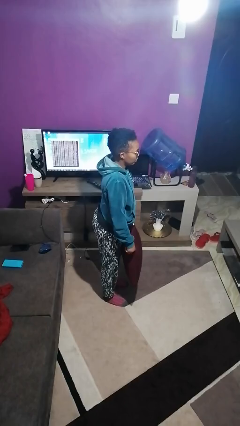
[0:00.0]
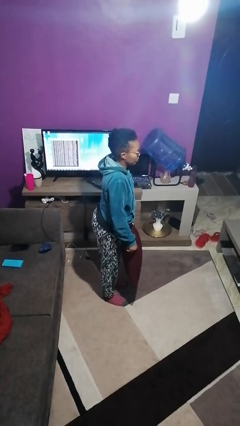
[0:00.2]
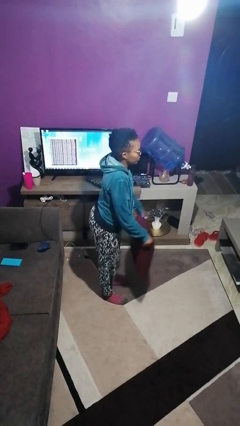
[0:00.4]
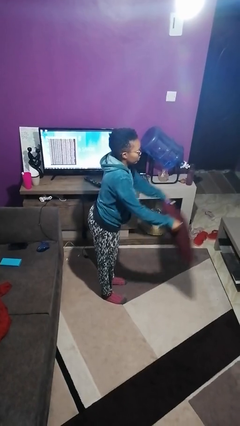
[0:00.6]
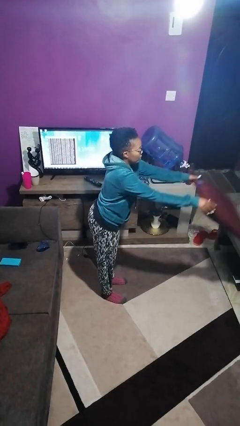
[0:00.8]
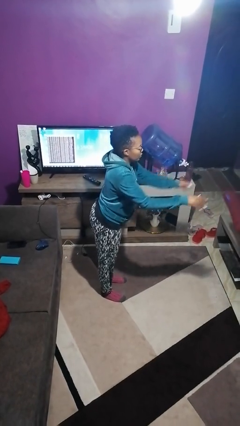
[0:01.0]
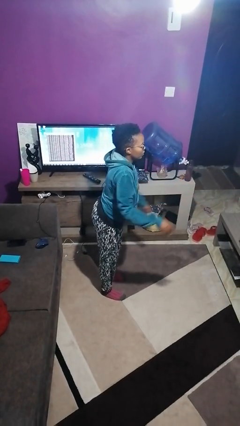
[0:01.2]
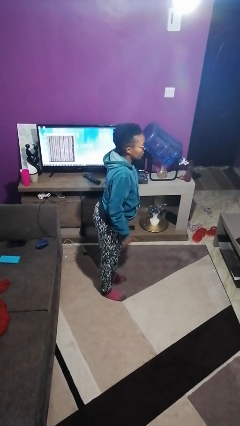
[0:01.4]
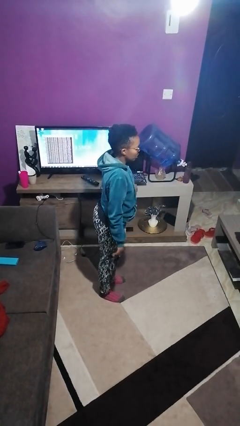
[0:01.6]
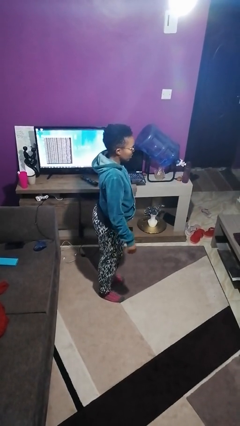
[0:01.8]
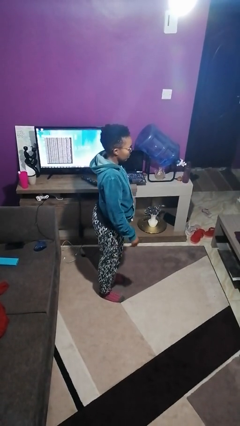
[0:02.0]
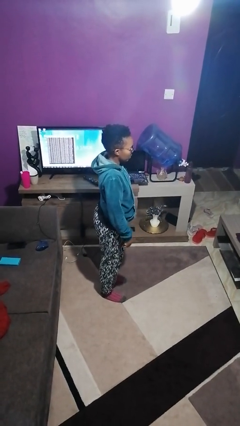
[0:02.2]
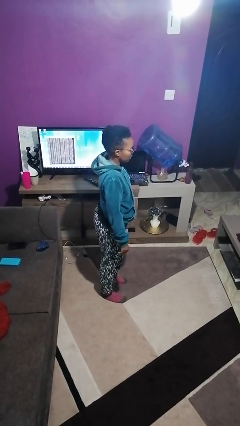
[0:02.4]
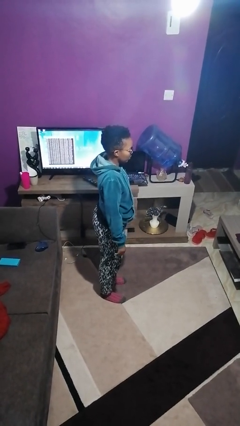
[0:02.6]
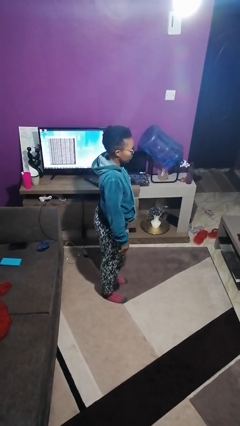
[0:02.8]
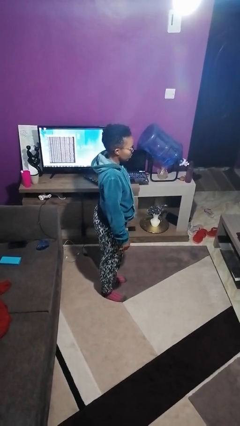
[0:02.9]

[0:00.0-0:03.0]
person throws object on table

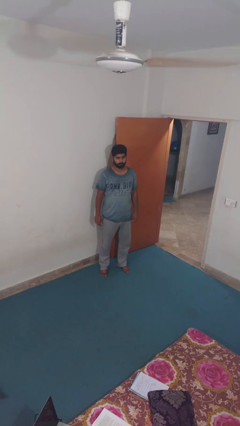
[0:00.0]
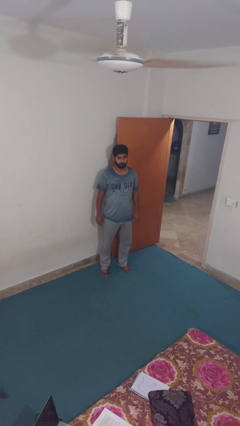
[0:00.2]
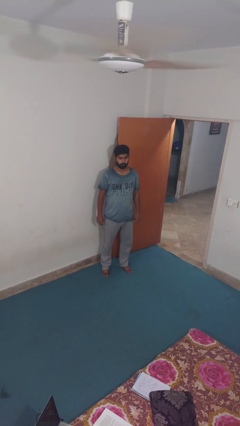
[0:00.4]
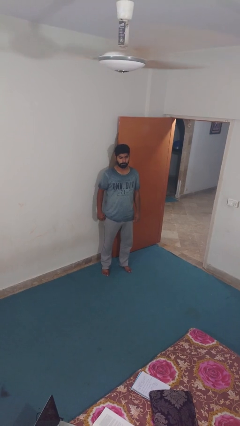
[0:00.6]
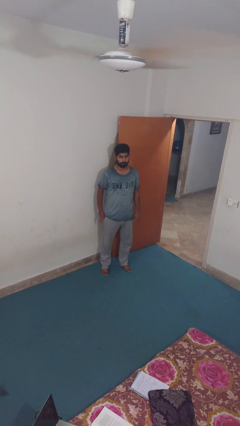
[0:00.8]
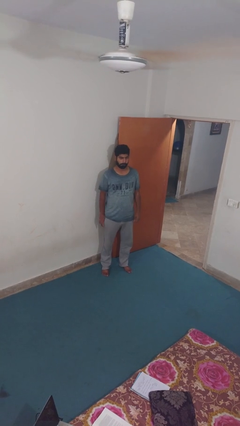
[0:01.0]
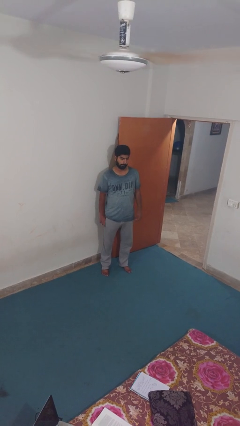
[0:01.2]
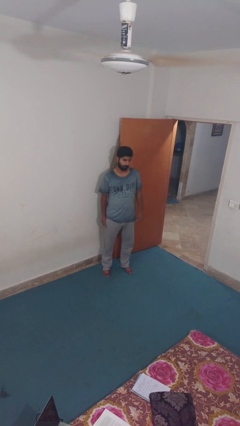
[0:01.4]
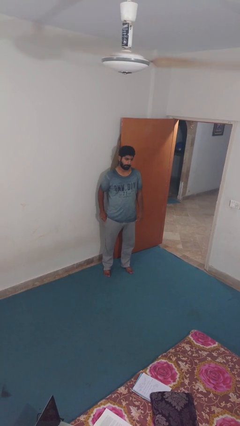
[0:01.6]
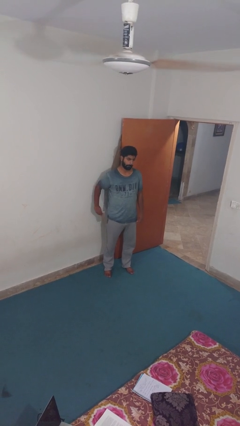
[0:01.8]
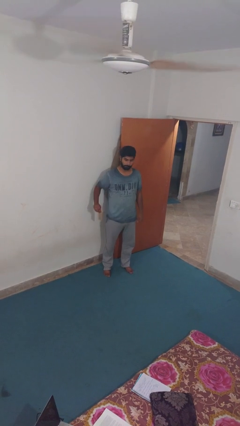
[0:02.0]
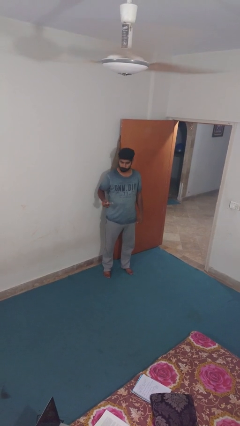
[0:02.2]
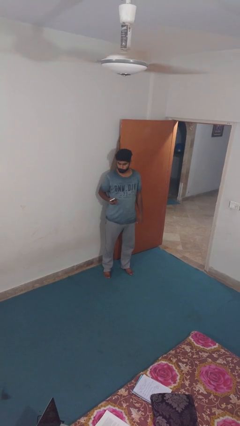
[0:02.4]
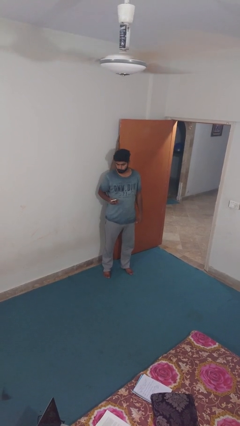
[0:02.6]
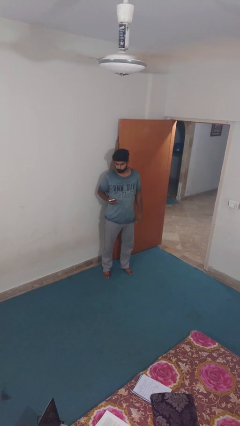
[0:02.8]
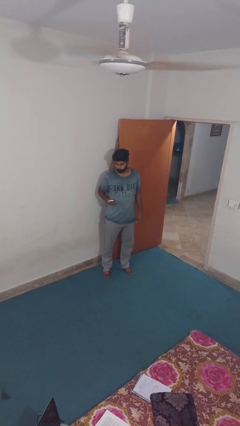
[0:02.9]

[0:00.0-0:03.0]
person takes phone from pocket

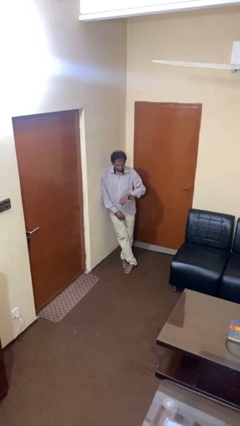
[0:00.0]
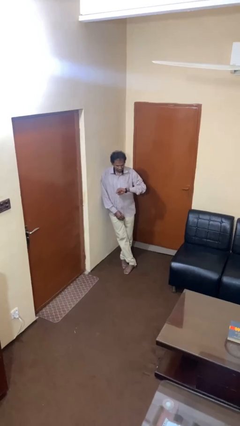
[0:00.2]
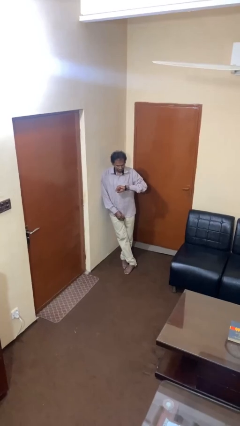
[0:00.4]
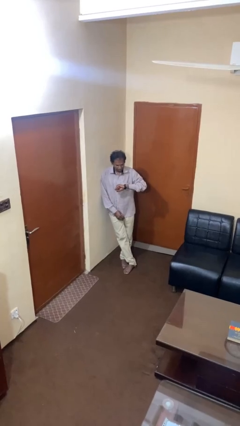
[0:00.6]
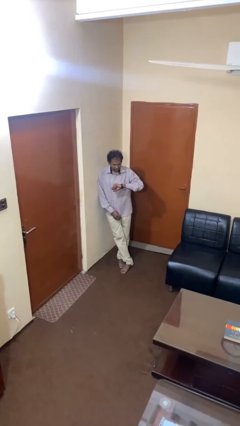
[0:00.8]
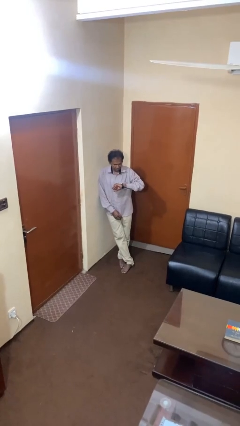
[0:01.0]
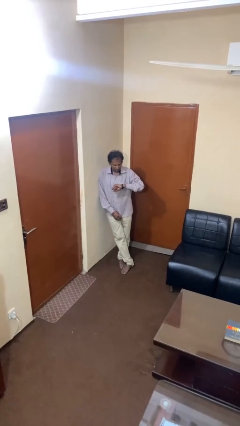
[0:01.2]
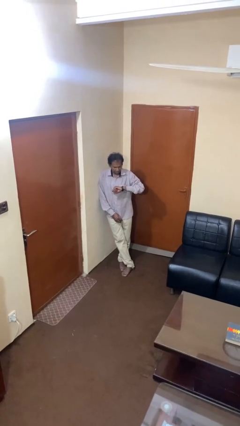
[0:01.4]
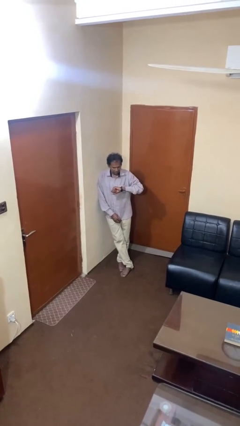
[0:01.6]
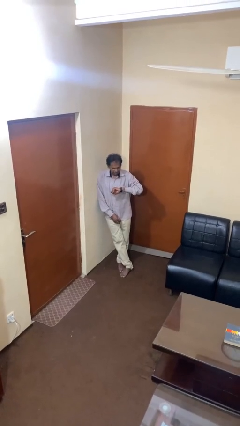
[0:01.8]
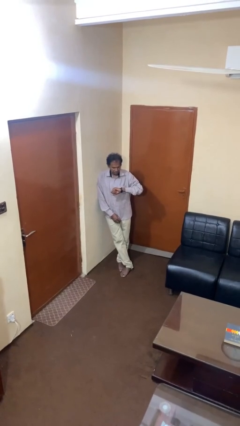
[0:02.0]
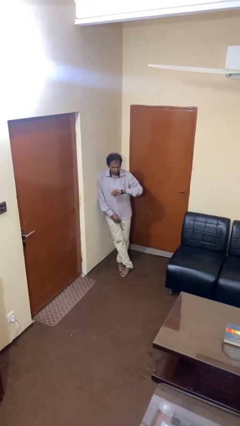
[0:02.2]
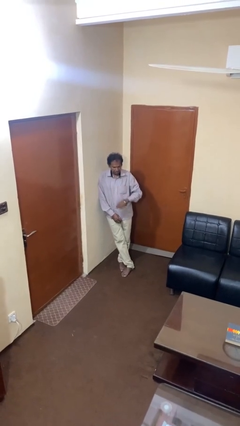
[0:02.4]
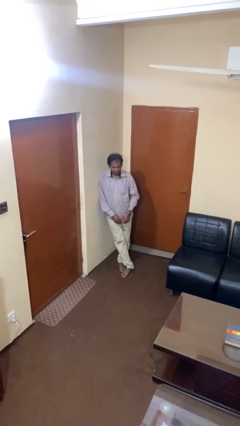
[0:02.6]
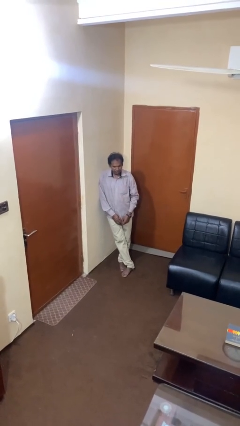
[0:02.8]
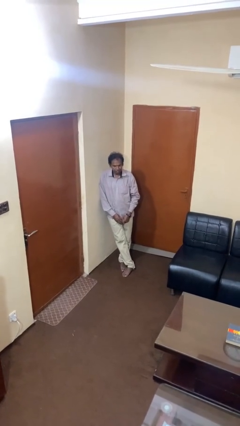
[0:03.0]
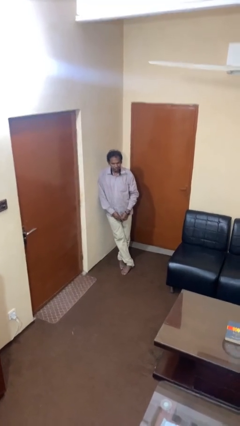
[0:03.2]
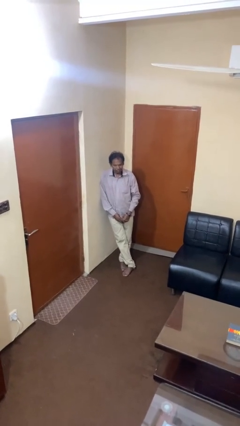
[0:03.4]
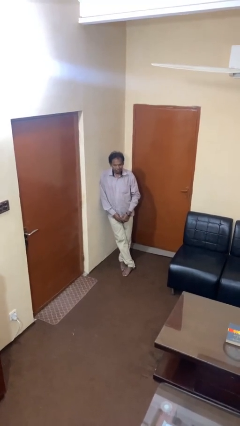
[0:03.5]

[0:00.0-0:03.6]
person looks at wristwatch

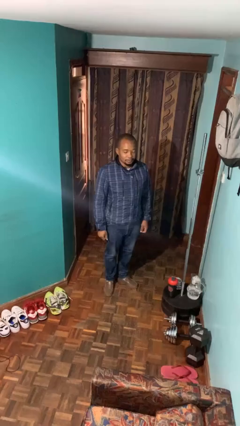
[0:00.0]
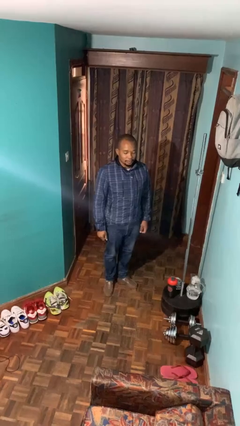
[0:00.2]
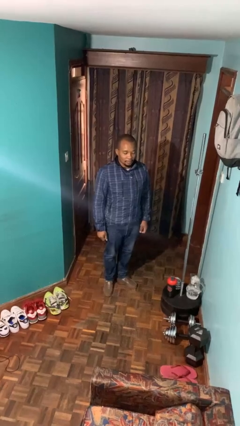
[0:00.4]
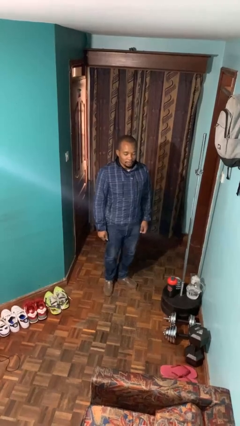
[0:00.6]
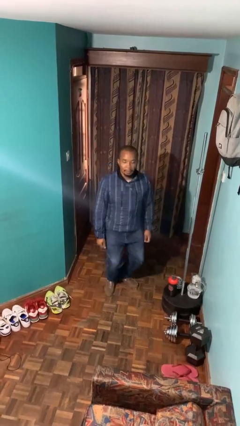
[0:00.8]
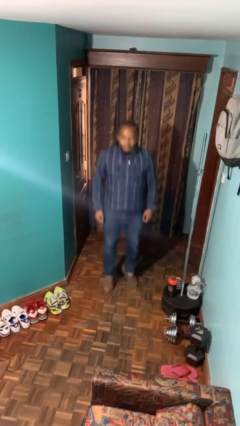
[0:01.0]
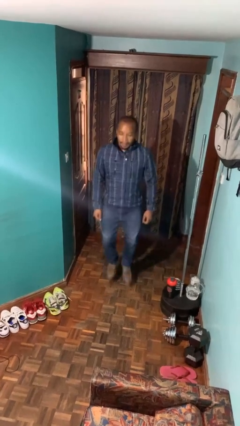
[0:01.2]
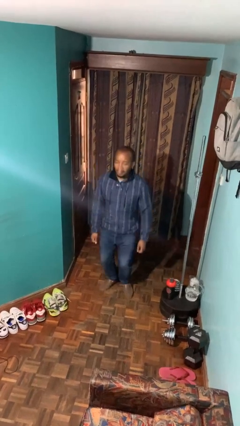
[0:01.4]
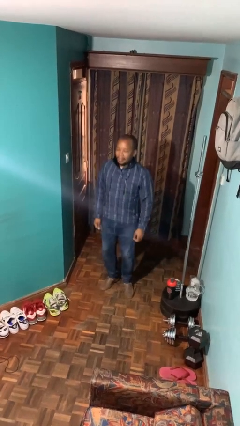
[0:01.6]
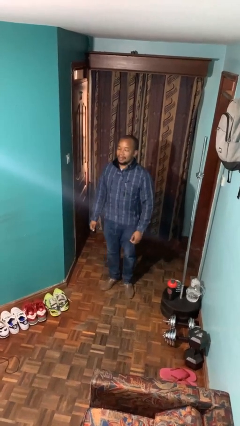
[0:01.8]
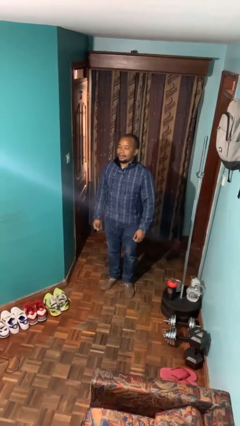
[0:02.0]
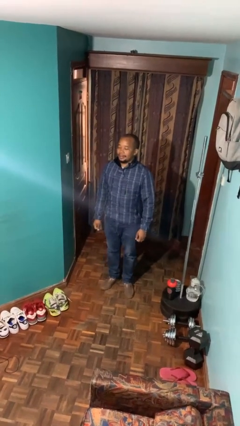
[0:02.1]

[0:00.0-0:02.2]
person jumps

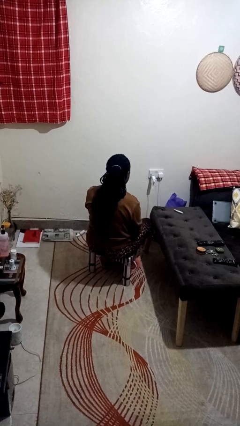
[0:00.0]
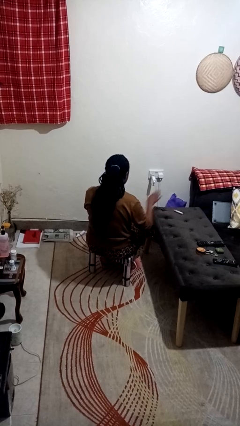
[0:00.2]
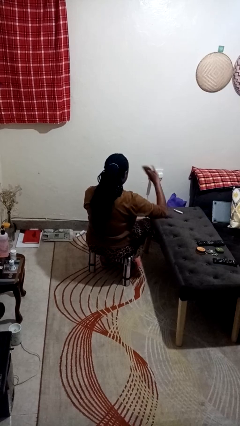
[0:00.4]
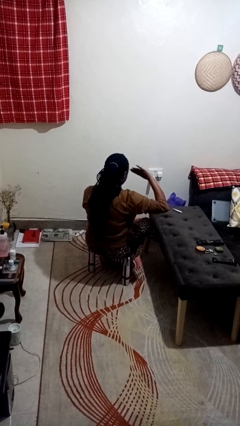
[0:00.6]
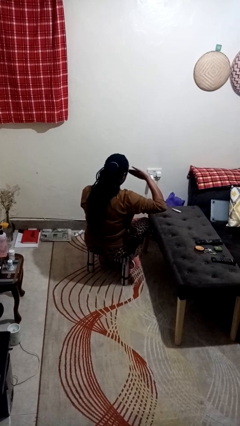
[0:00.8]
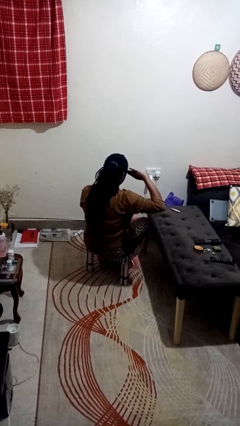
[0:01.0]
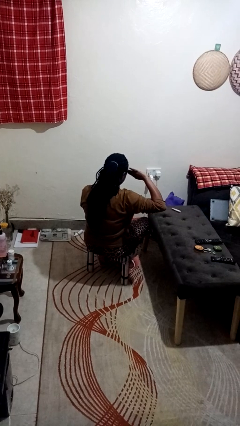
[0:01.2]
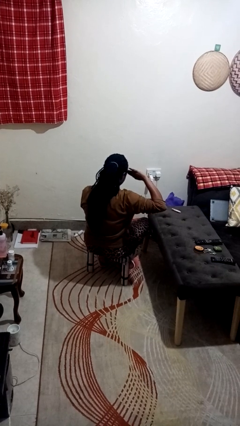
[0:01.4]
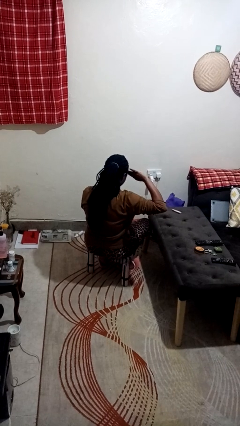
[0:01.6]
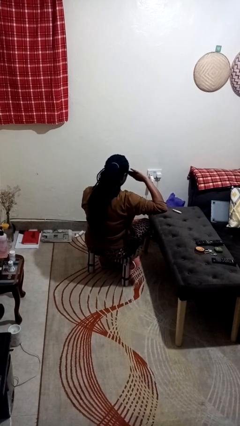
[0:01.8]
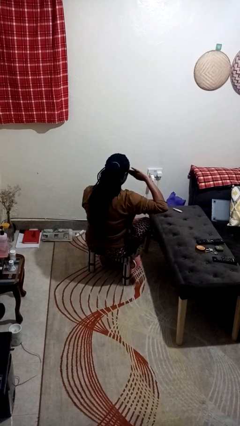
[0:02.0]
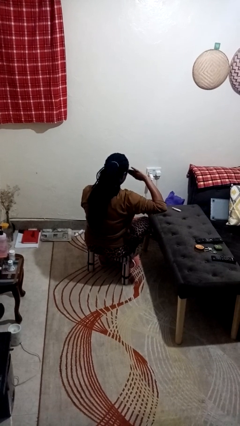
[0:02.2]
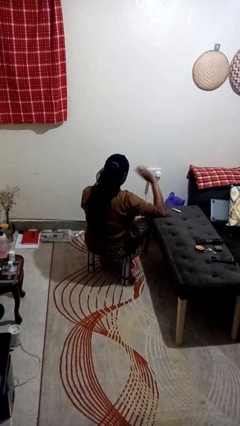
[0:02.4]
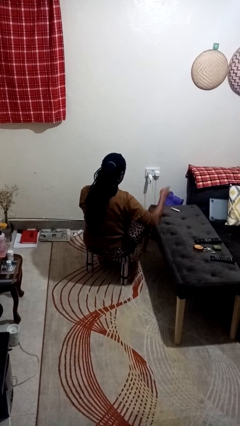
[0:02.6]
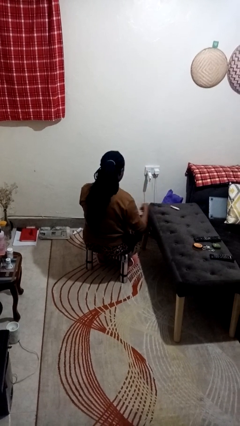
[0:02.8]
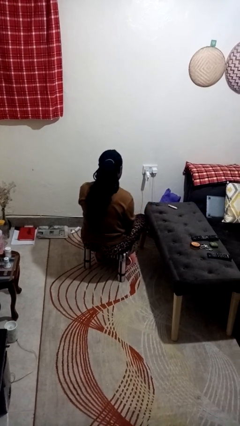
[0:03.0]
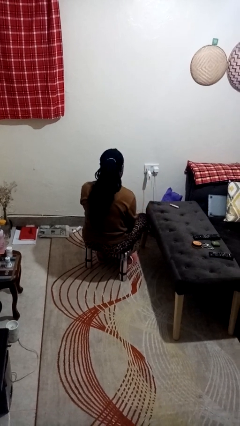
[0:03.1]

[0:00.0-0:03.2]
person salutes

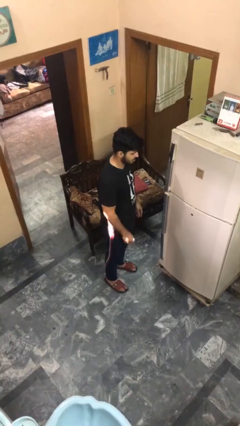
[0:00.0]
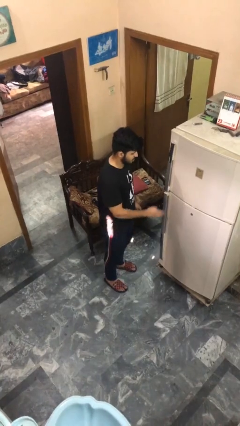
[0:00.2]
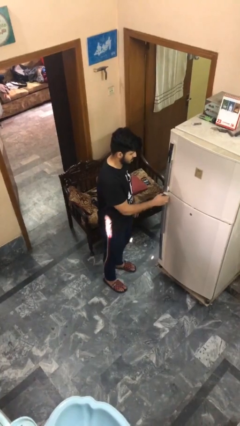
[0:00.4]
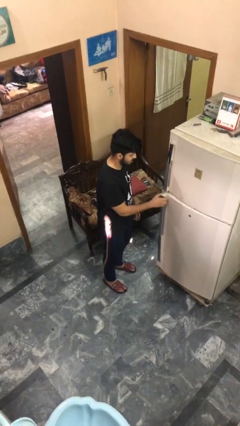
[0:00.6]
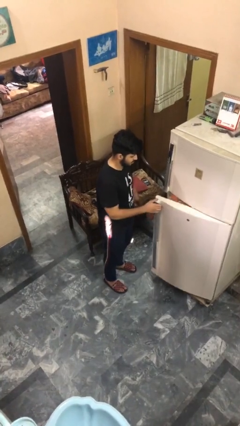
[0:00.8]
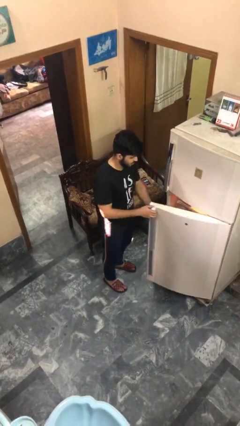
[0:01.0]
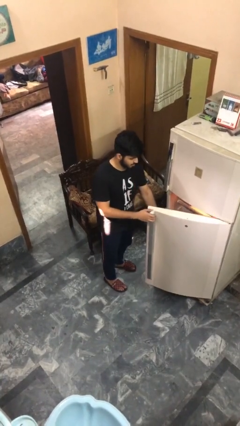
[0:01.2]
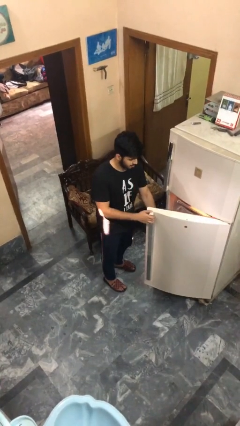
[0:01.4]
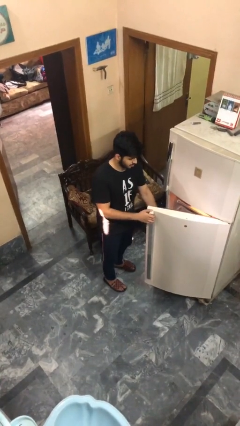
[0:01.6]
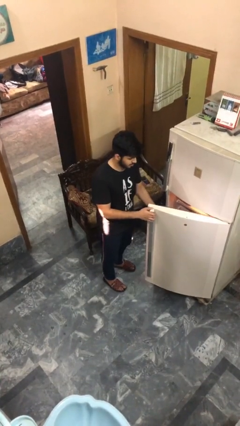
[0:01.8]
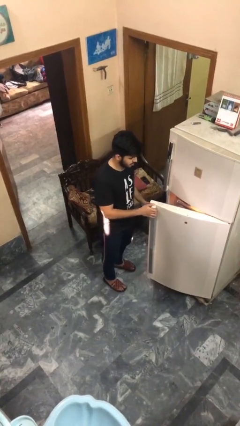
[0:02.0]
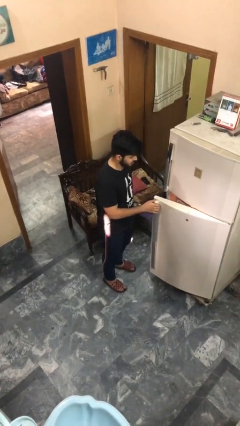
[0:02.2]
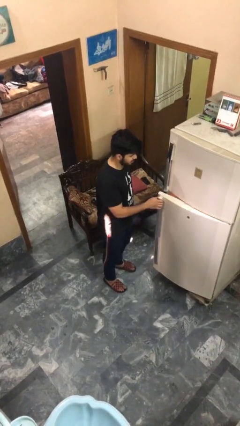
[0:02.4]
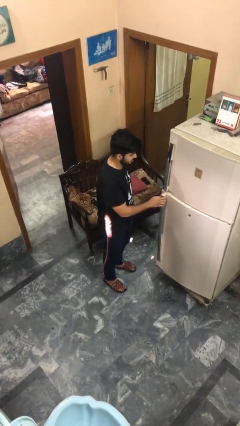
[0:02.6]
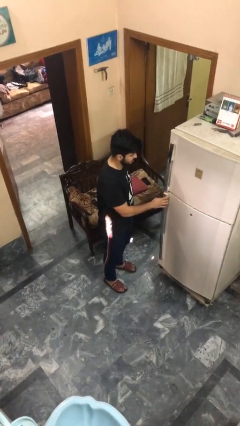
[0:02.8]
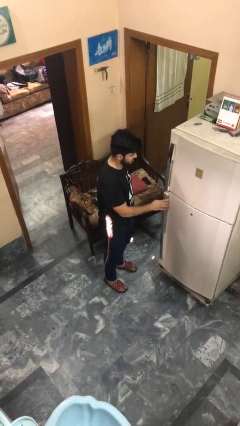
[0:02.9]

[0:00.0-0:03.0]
person takes object from refrigerator
